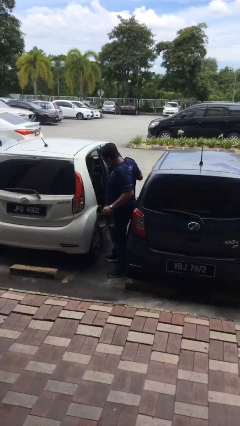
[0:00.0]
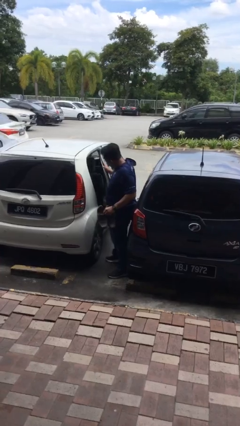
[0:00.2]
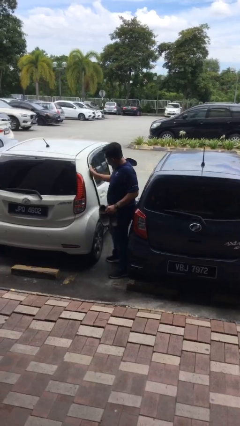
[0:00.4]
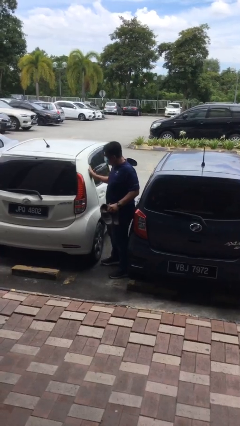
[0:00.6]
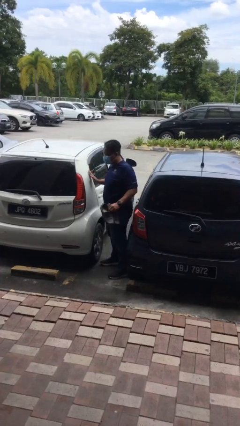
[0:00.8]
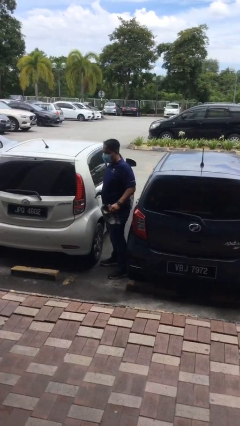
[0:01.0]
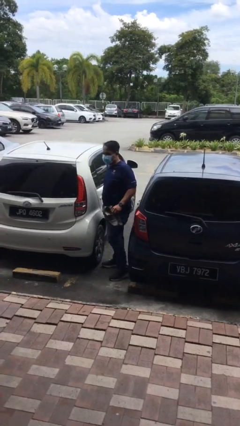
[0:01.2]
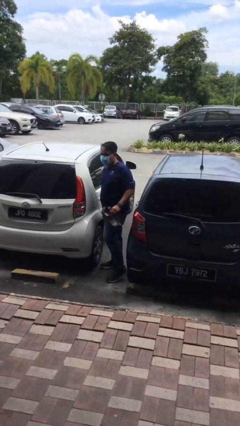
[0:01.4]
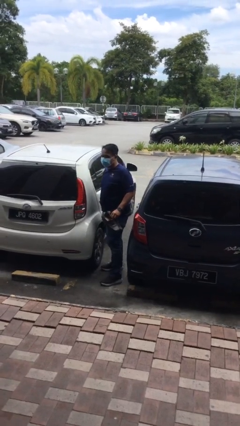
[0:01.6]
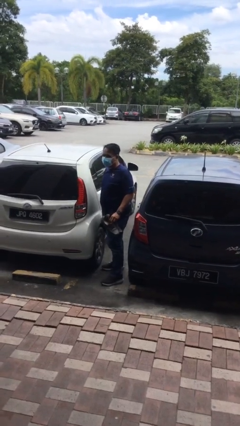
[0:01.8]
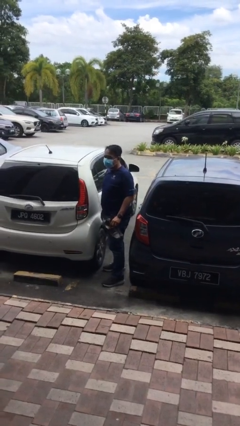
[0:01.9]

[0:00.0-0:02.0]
person closes car door

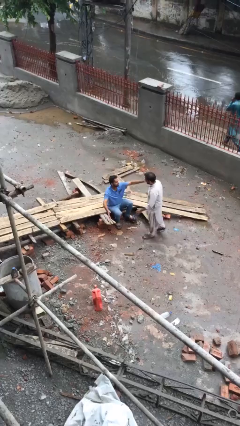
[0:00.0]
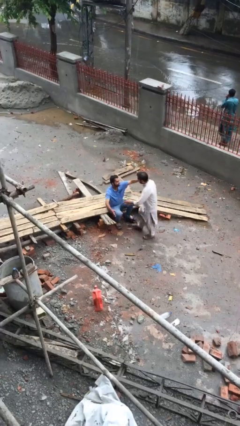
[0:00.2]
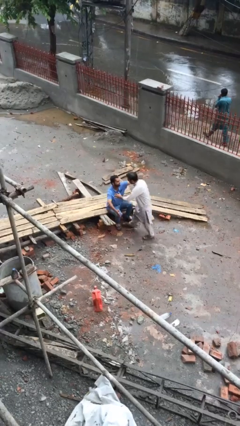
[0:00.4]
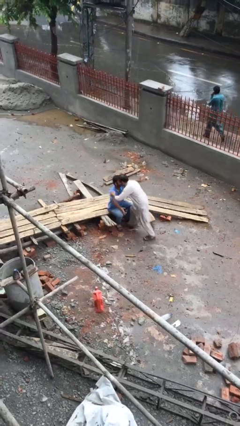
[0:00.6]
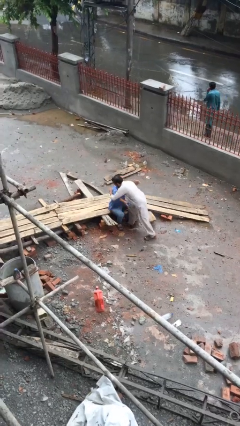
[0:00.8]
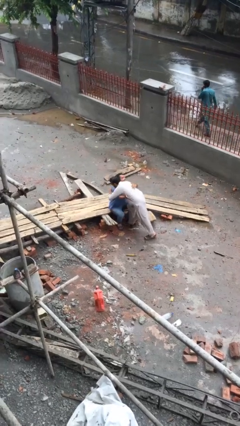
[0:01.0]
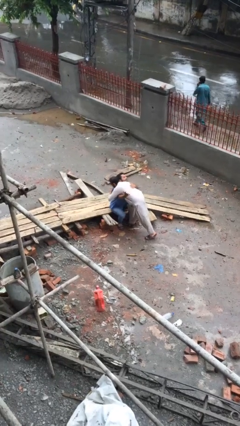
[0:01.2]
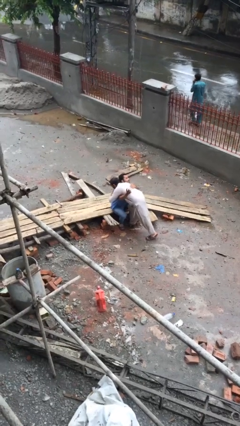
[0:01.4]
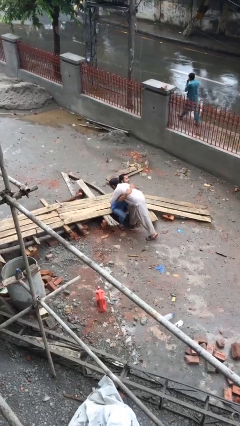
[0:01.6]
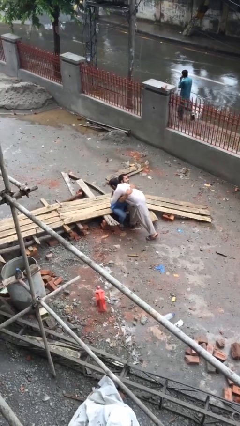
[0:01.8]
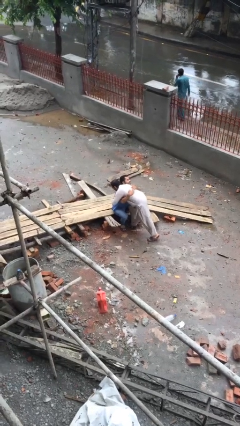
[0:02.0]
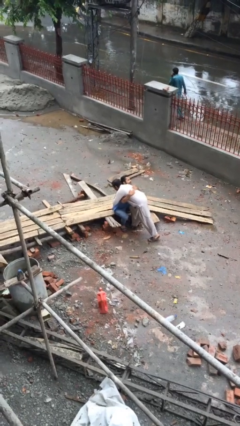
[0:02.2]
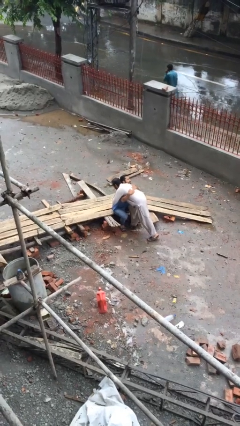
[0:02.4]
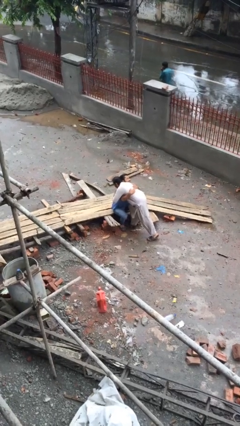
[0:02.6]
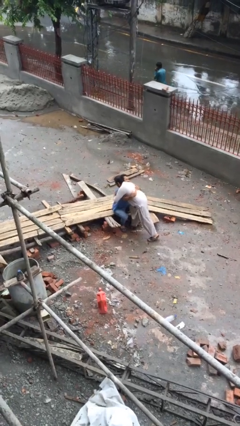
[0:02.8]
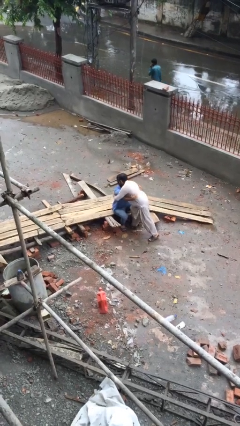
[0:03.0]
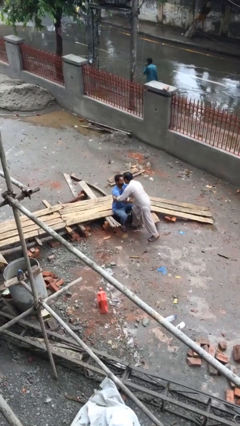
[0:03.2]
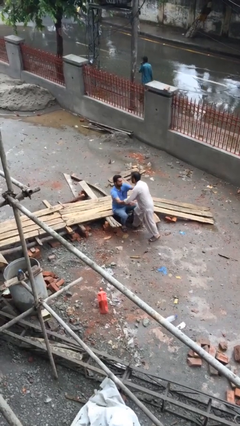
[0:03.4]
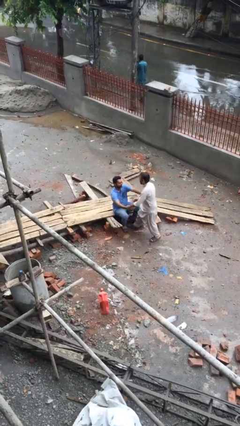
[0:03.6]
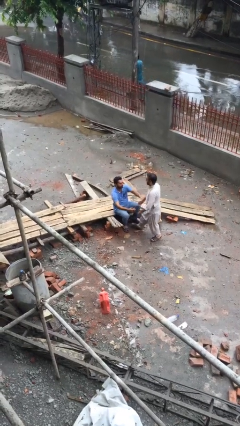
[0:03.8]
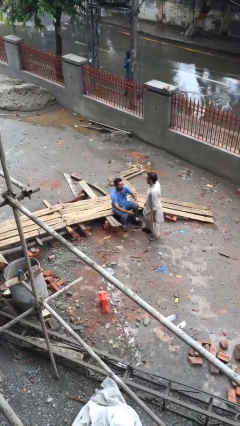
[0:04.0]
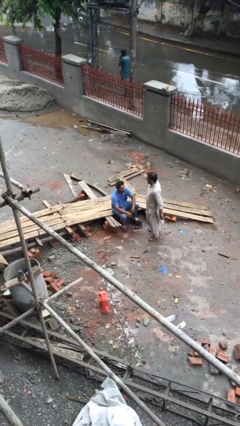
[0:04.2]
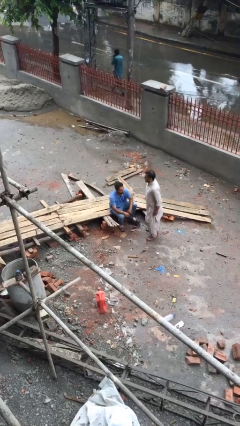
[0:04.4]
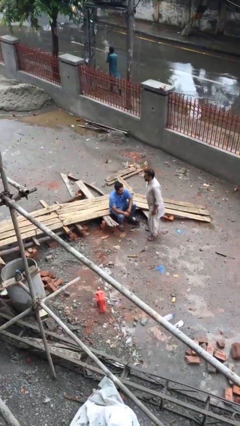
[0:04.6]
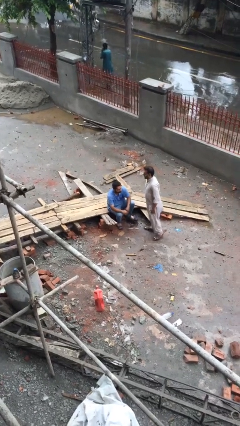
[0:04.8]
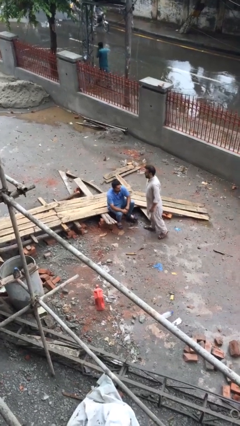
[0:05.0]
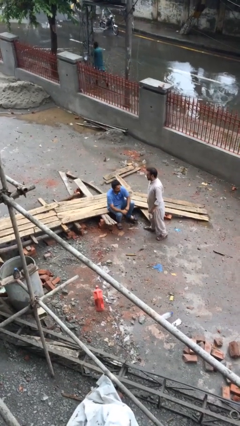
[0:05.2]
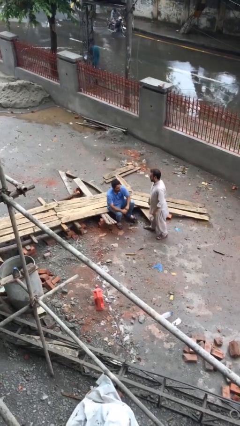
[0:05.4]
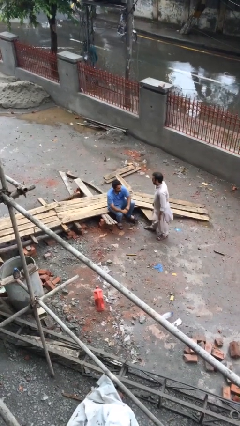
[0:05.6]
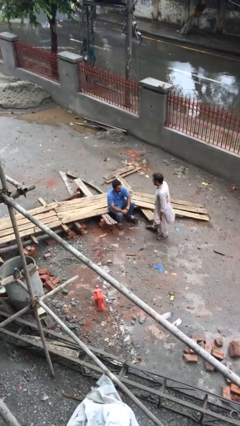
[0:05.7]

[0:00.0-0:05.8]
person embraces person

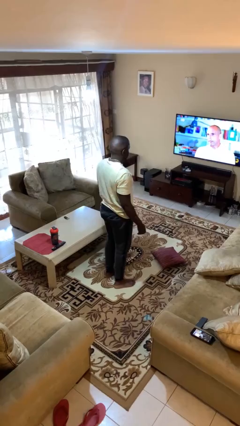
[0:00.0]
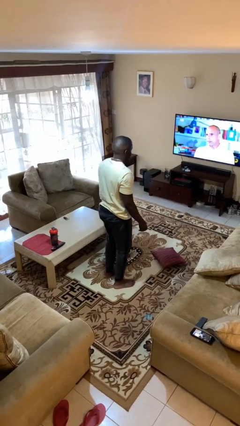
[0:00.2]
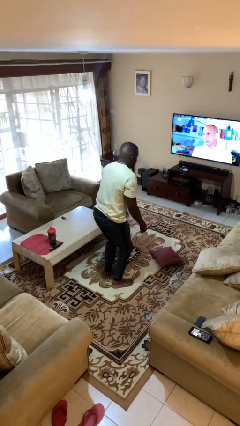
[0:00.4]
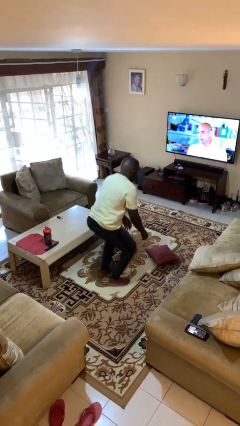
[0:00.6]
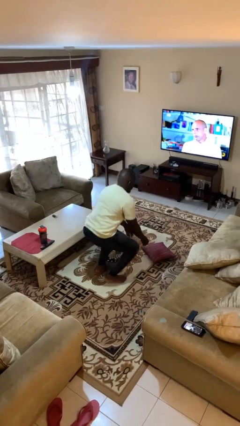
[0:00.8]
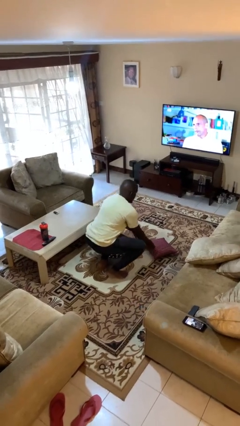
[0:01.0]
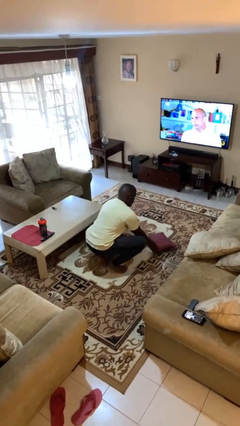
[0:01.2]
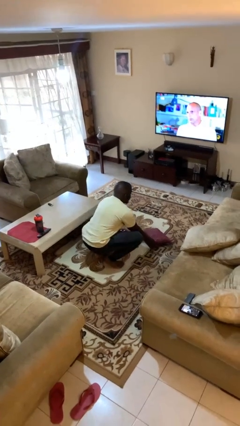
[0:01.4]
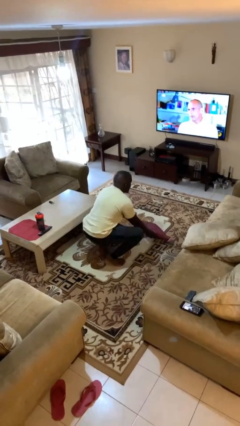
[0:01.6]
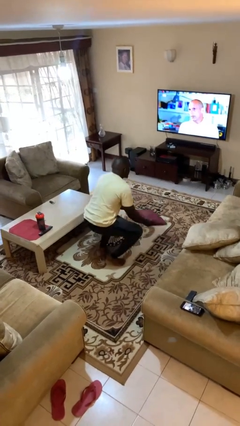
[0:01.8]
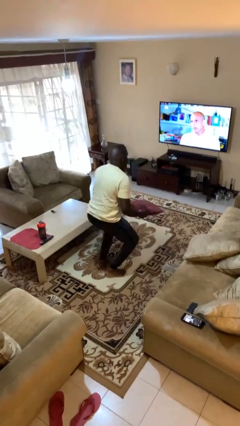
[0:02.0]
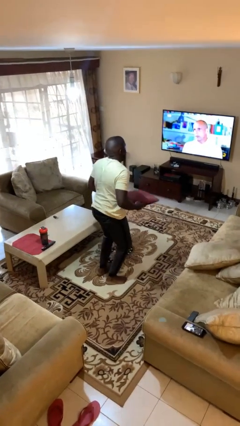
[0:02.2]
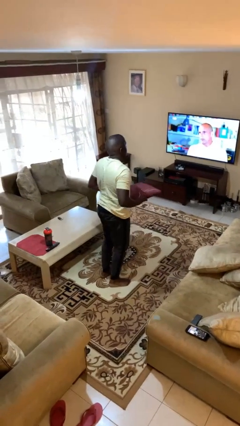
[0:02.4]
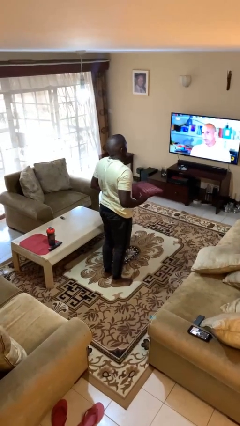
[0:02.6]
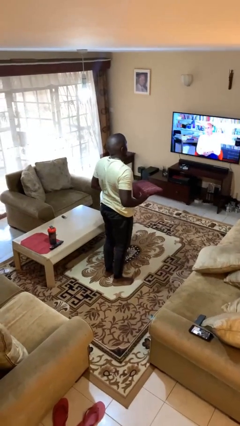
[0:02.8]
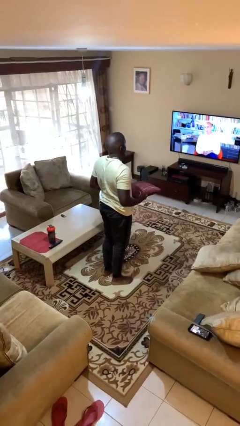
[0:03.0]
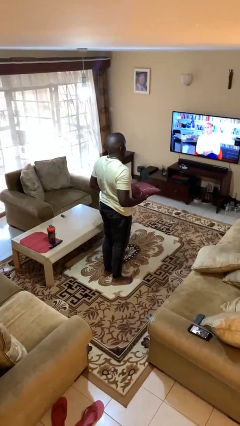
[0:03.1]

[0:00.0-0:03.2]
person picks up object from floor

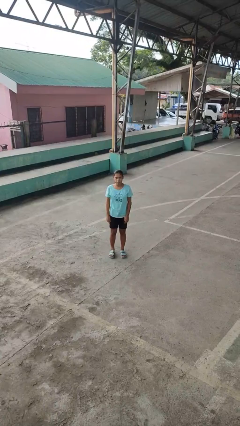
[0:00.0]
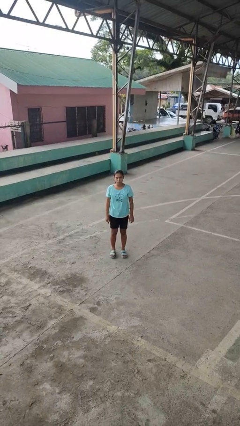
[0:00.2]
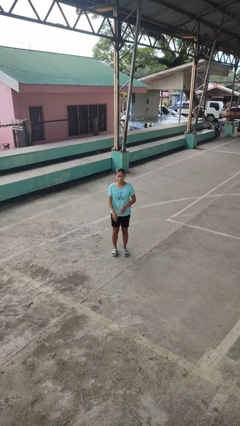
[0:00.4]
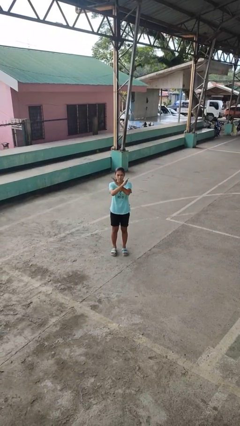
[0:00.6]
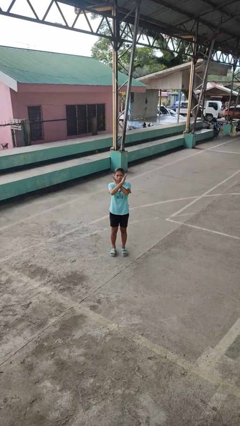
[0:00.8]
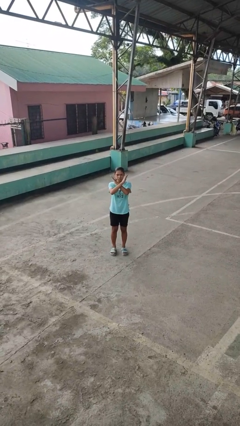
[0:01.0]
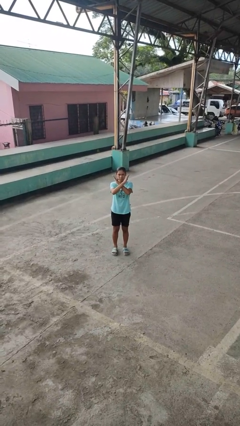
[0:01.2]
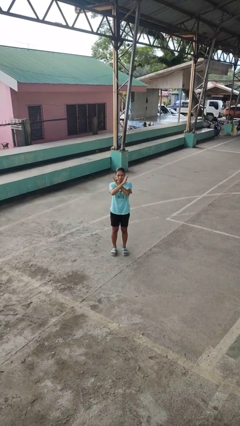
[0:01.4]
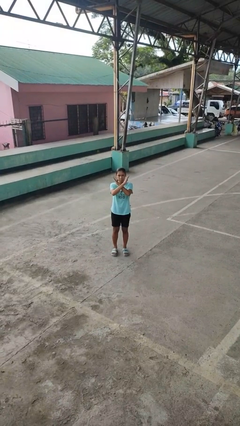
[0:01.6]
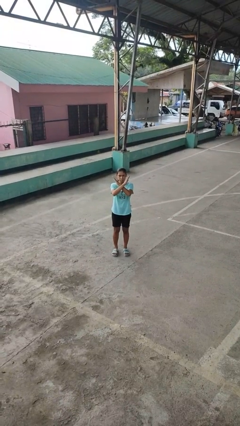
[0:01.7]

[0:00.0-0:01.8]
person gestures arms x

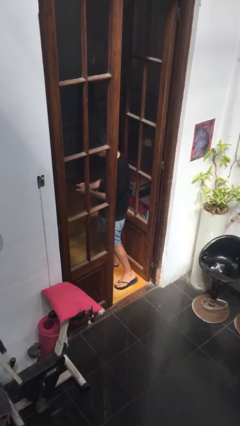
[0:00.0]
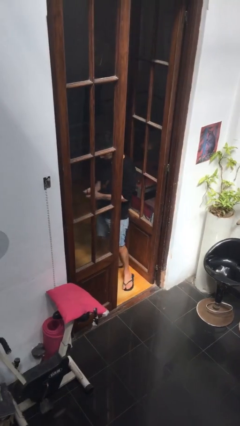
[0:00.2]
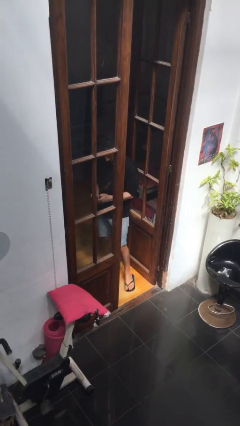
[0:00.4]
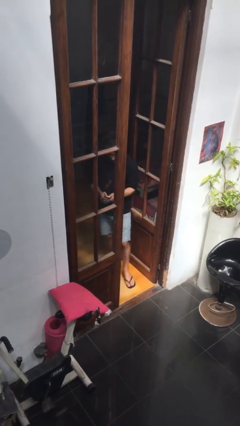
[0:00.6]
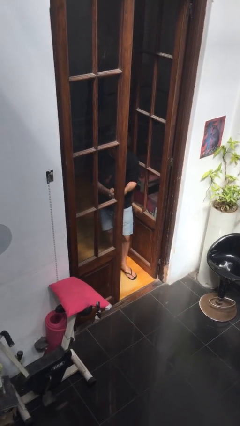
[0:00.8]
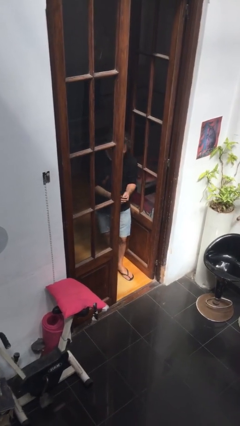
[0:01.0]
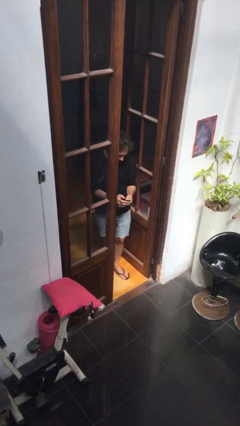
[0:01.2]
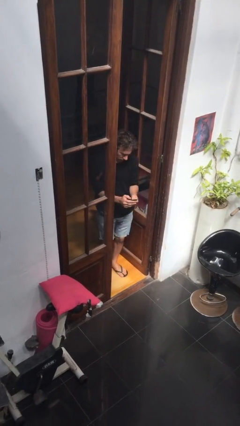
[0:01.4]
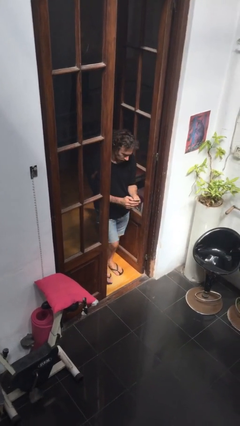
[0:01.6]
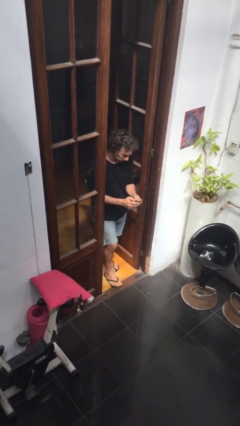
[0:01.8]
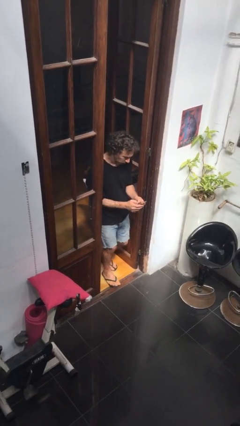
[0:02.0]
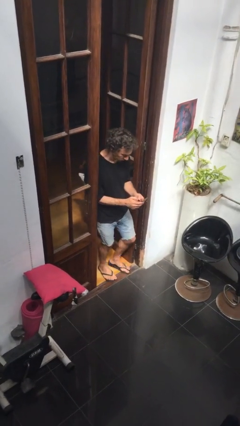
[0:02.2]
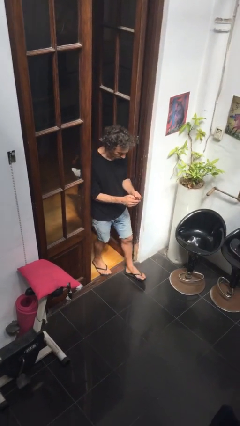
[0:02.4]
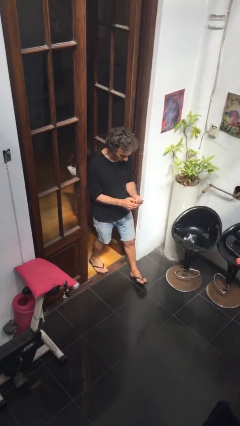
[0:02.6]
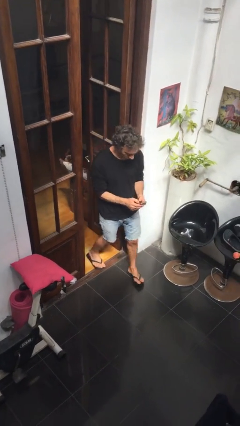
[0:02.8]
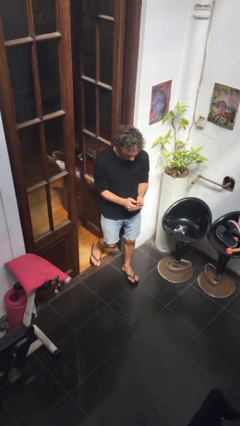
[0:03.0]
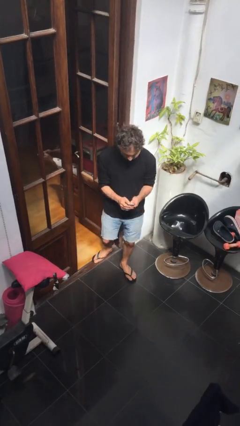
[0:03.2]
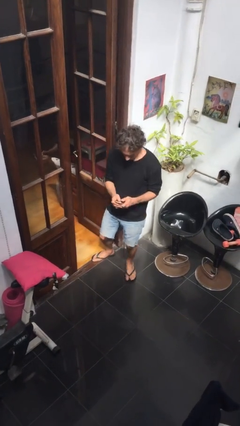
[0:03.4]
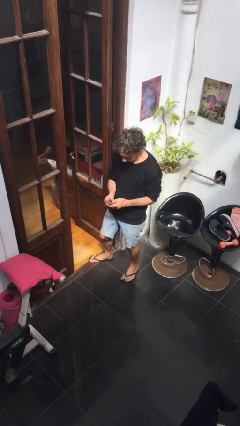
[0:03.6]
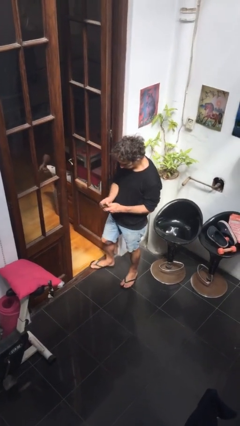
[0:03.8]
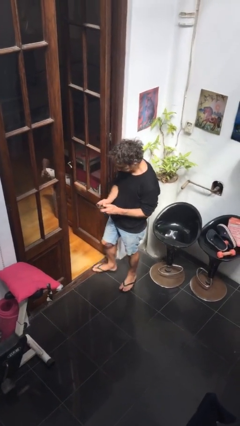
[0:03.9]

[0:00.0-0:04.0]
person enters scene through structure

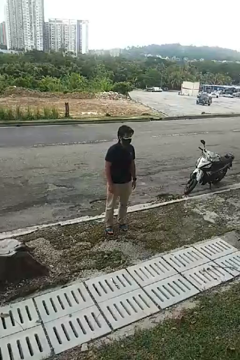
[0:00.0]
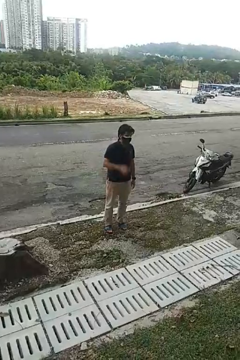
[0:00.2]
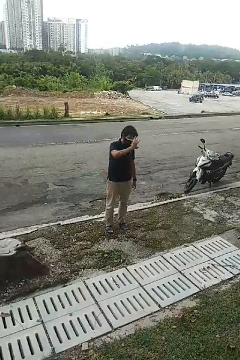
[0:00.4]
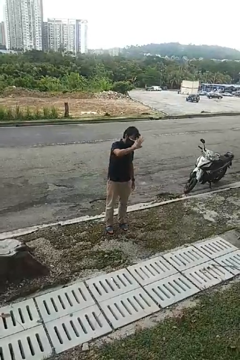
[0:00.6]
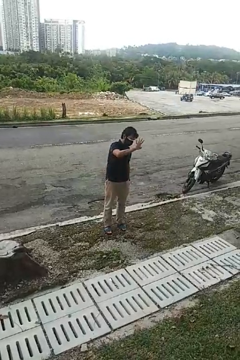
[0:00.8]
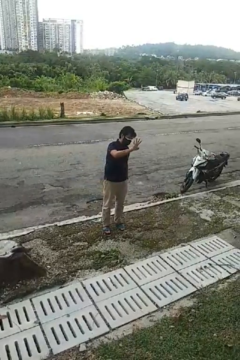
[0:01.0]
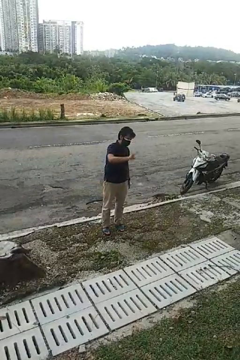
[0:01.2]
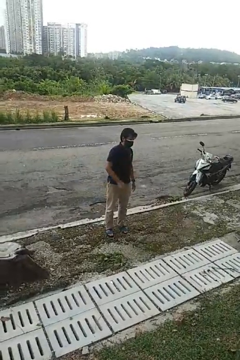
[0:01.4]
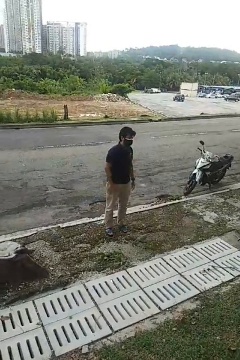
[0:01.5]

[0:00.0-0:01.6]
person gestures number four
